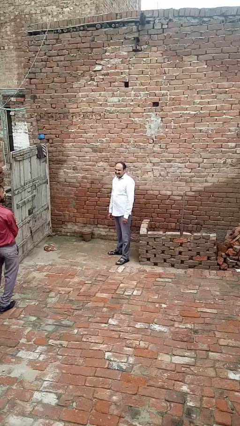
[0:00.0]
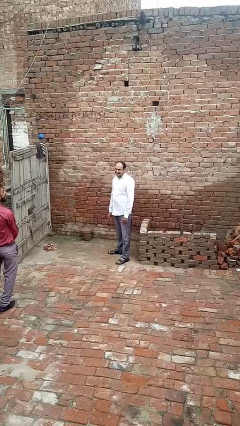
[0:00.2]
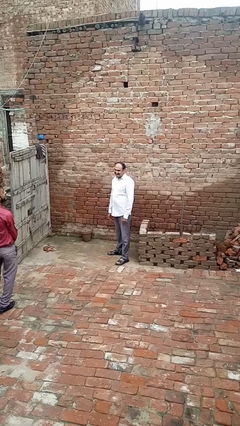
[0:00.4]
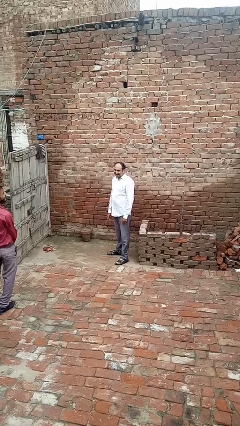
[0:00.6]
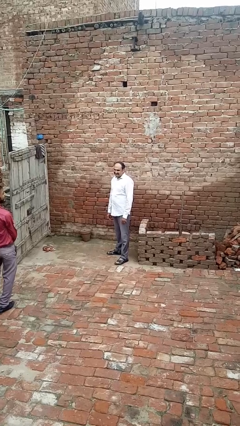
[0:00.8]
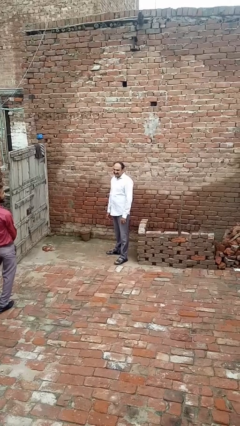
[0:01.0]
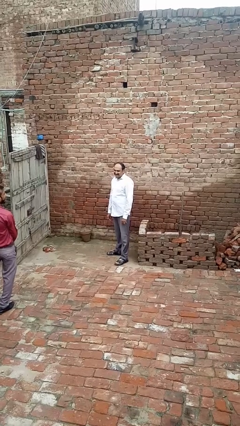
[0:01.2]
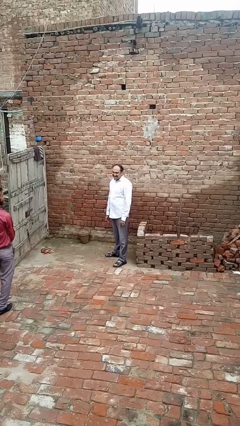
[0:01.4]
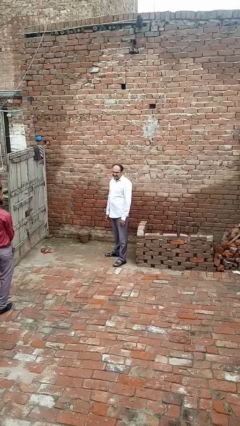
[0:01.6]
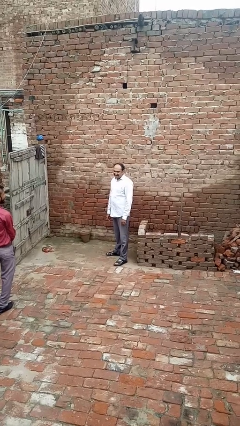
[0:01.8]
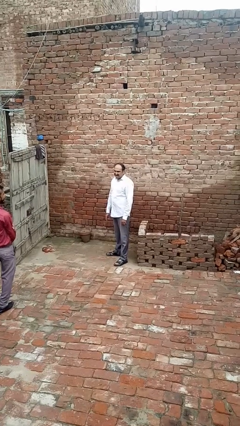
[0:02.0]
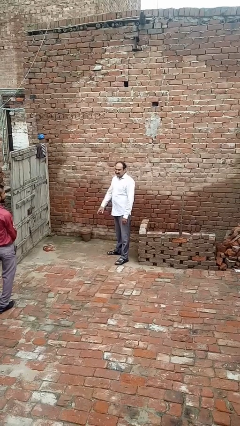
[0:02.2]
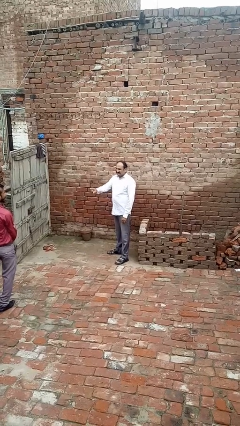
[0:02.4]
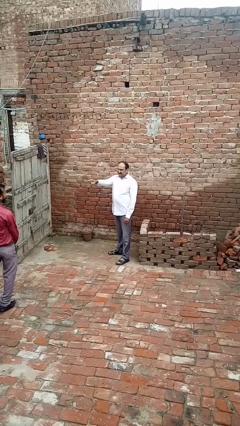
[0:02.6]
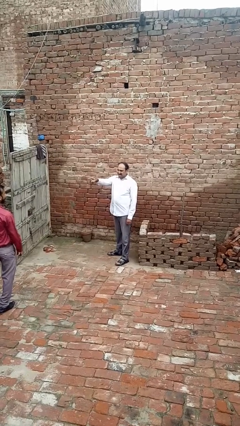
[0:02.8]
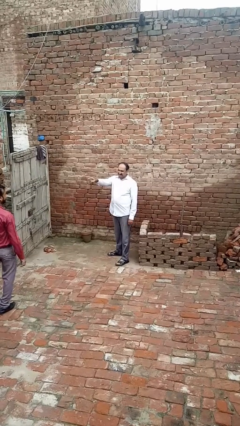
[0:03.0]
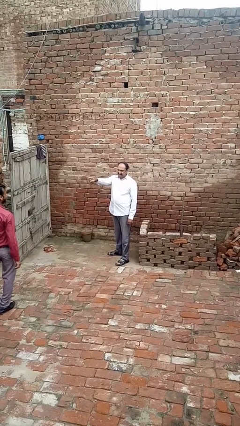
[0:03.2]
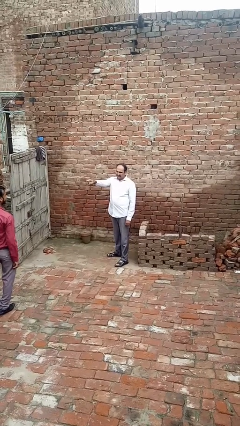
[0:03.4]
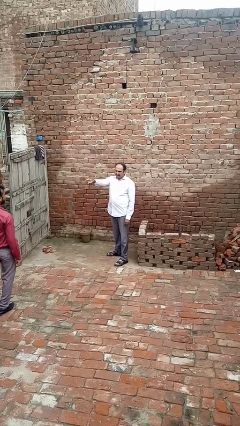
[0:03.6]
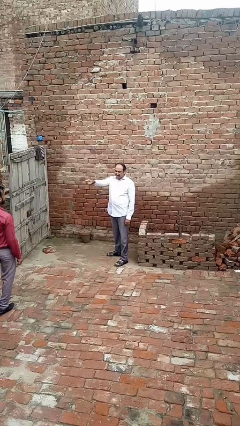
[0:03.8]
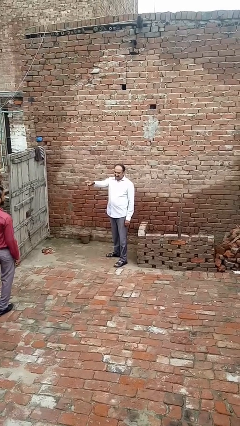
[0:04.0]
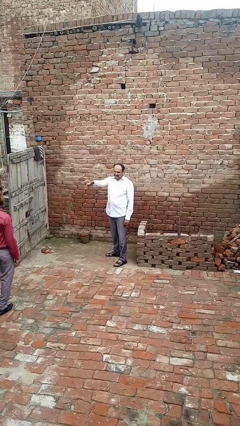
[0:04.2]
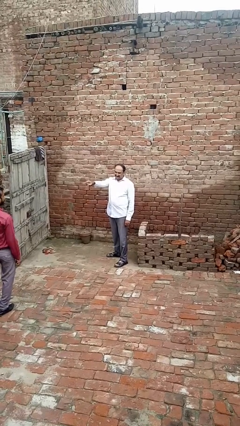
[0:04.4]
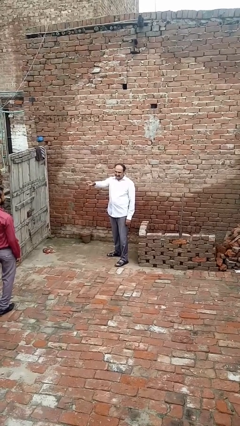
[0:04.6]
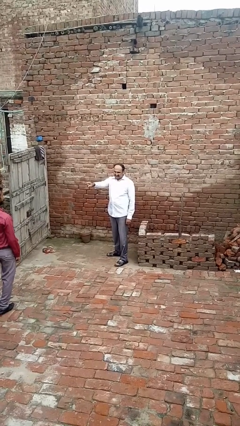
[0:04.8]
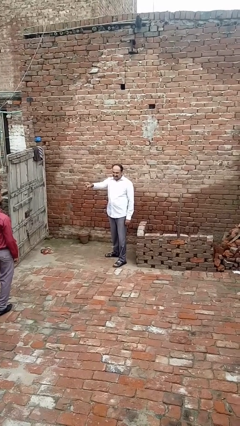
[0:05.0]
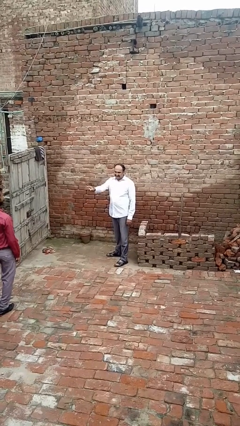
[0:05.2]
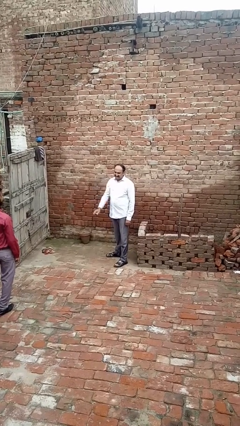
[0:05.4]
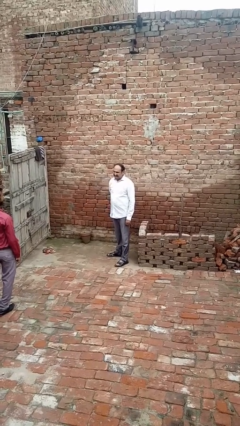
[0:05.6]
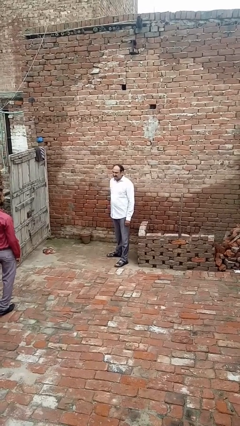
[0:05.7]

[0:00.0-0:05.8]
person points at person

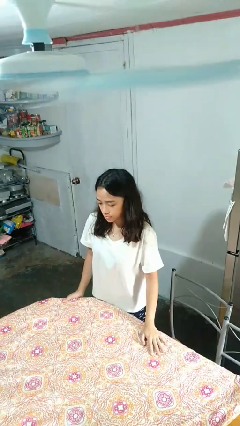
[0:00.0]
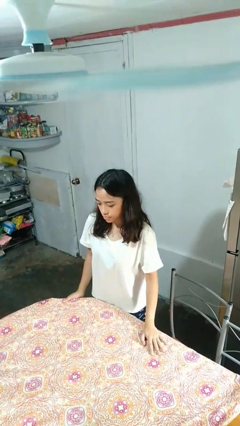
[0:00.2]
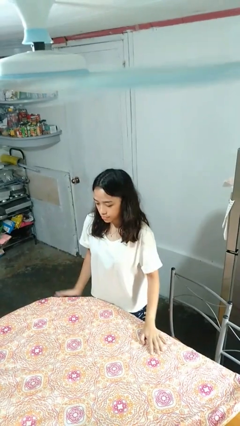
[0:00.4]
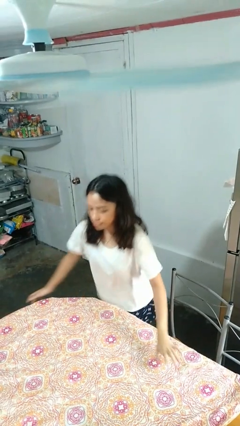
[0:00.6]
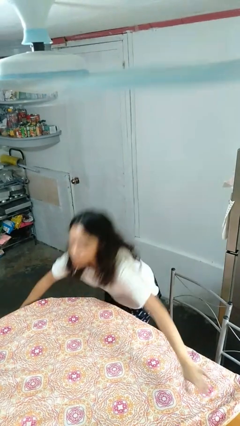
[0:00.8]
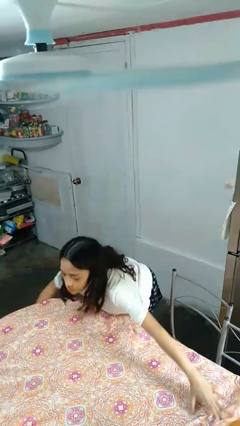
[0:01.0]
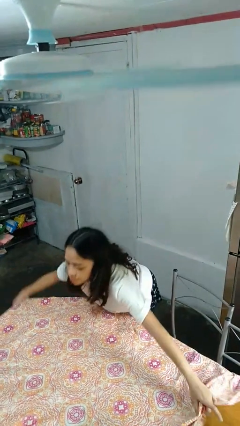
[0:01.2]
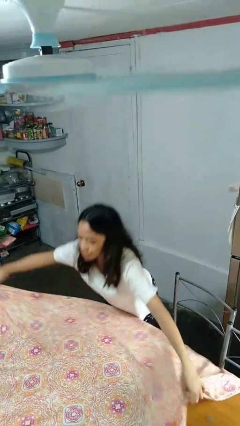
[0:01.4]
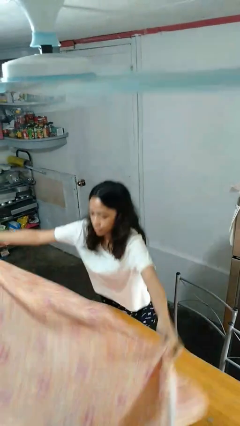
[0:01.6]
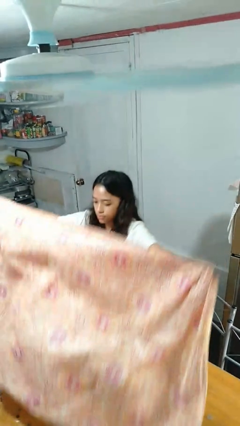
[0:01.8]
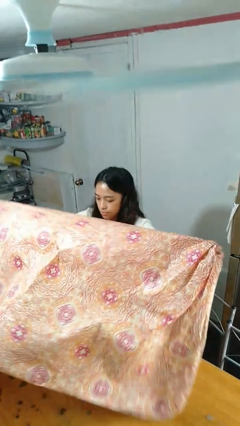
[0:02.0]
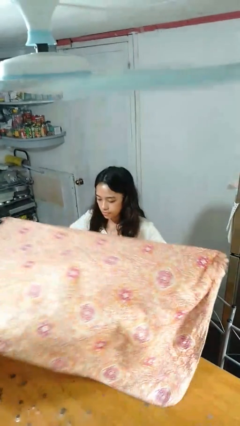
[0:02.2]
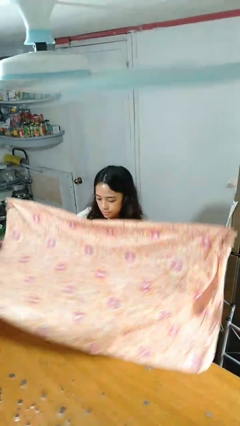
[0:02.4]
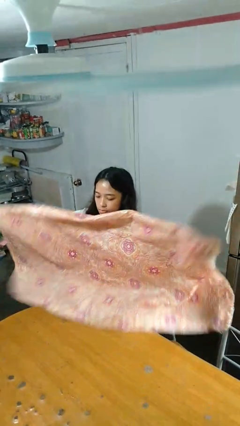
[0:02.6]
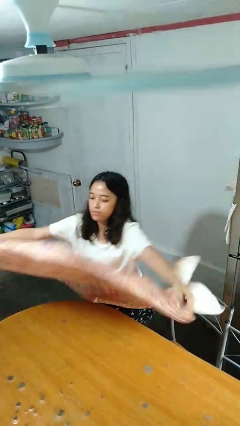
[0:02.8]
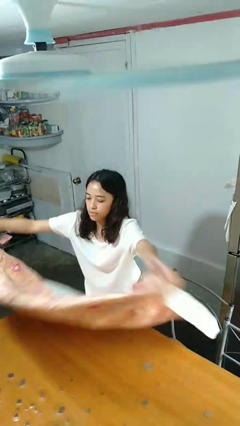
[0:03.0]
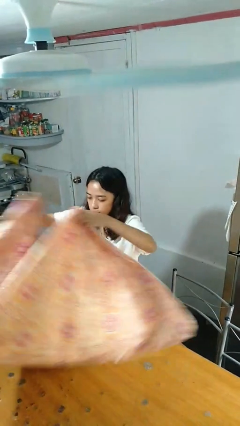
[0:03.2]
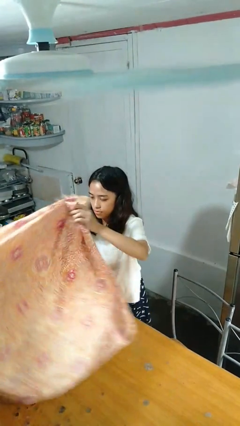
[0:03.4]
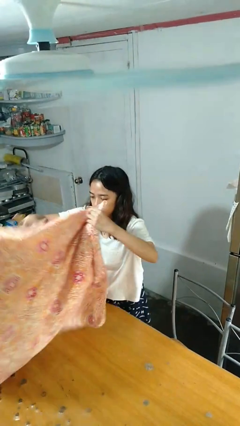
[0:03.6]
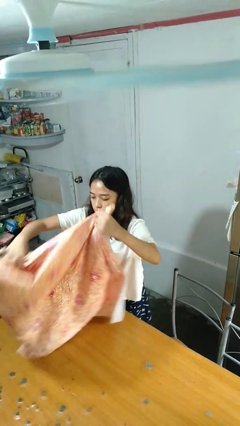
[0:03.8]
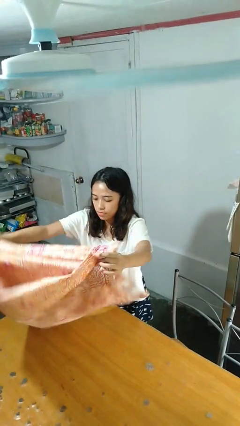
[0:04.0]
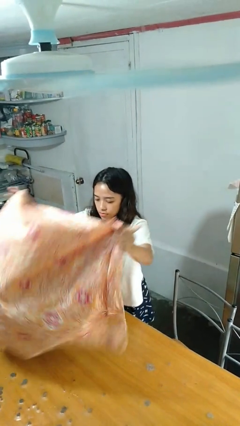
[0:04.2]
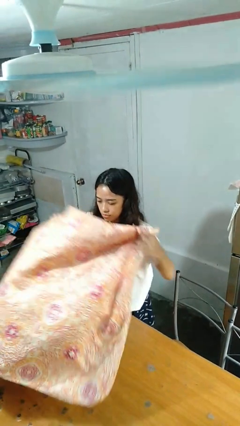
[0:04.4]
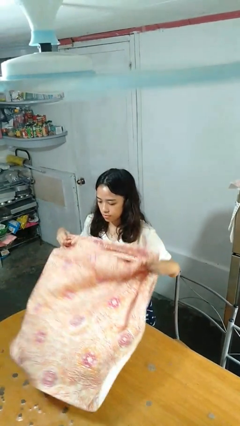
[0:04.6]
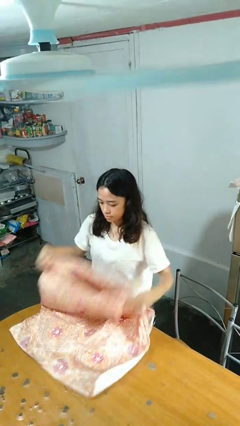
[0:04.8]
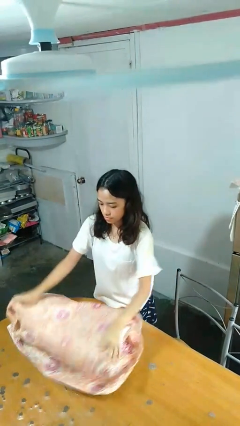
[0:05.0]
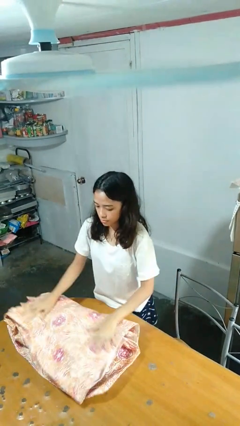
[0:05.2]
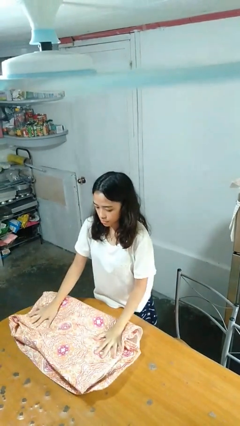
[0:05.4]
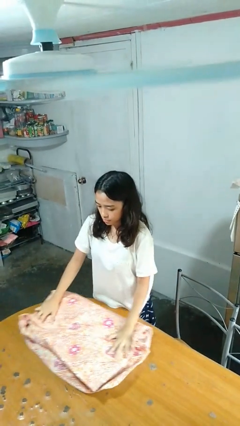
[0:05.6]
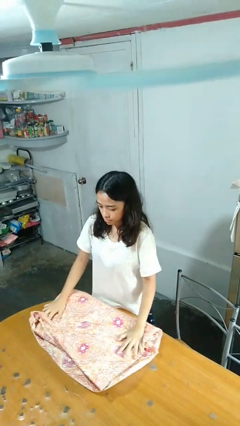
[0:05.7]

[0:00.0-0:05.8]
person folds tablecloth

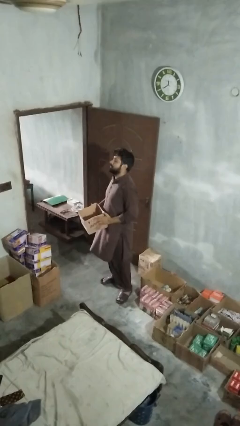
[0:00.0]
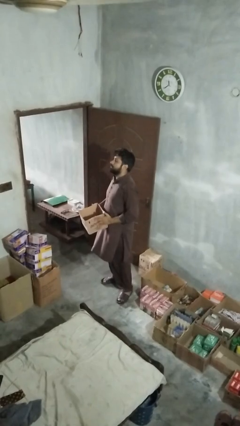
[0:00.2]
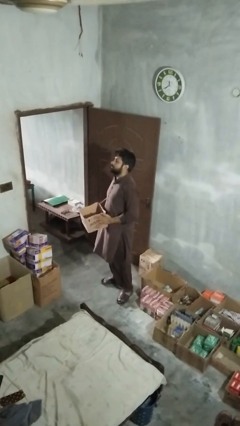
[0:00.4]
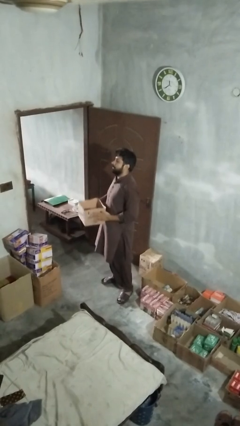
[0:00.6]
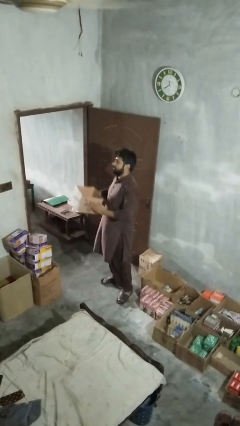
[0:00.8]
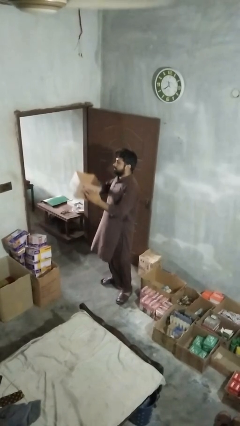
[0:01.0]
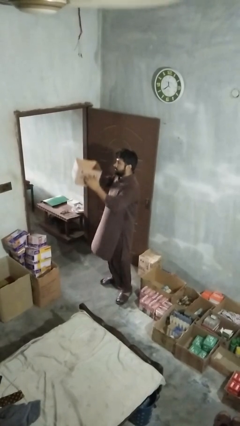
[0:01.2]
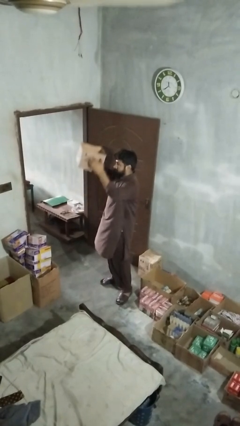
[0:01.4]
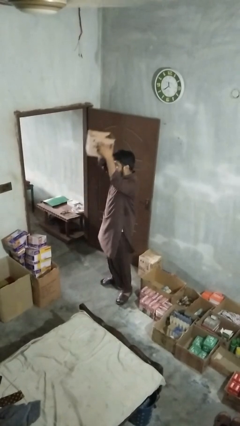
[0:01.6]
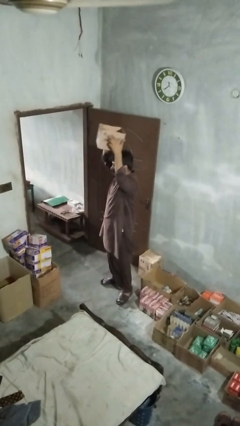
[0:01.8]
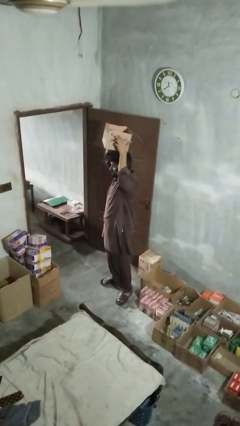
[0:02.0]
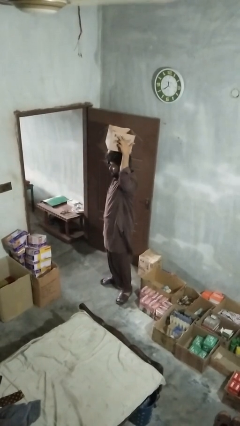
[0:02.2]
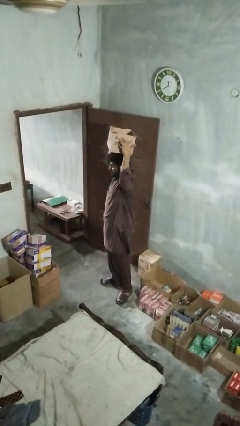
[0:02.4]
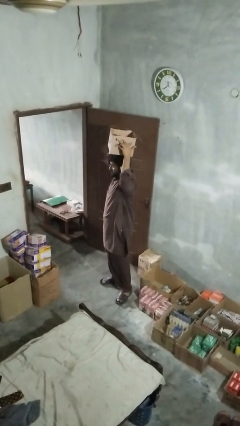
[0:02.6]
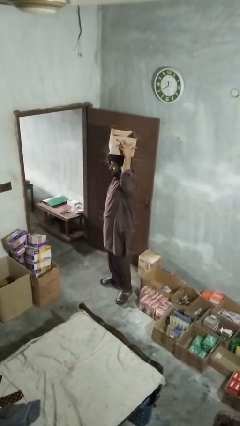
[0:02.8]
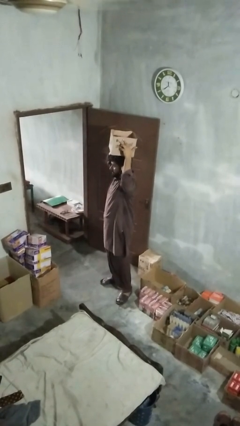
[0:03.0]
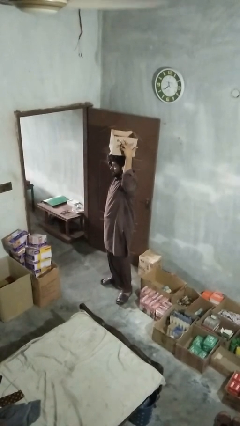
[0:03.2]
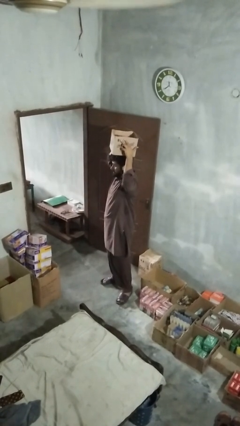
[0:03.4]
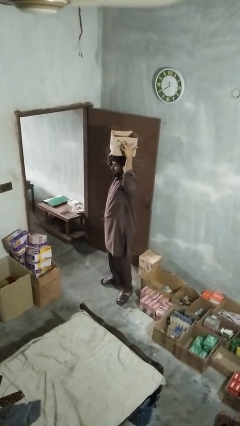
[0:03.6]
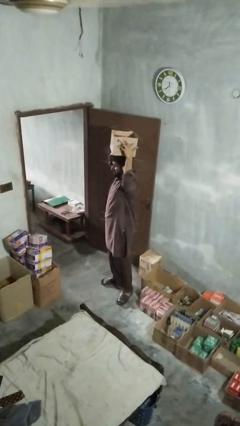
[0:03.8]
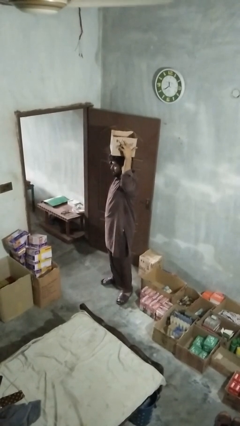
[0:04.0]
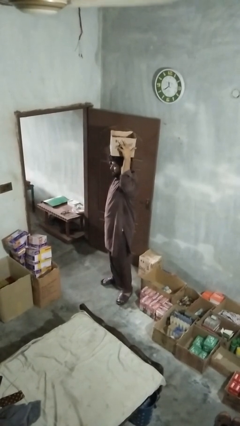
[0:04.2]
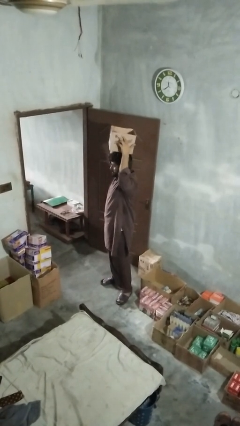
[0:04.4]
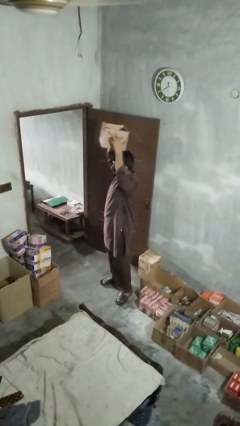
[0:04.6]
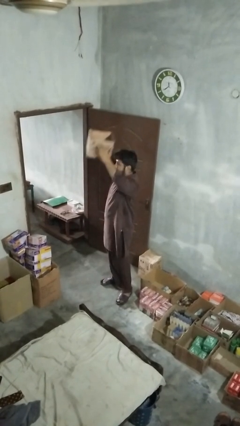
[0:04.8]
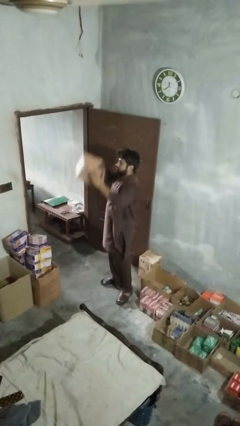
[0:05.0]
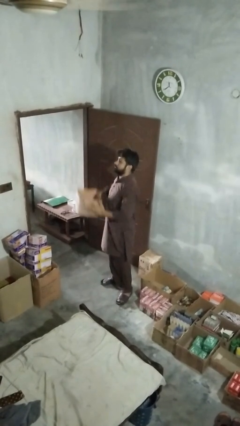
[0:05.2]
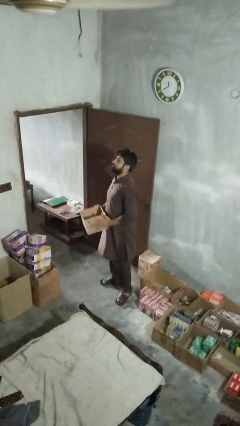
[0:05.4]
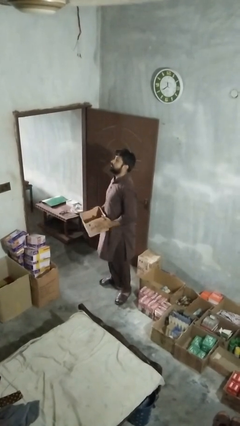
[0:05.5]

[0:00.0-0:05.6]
person holds object above head
